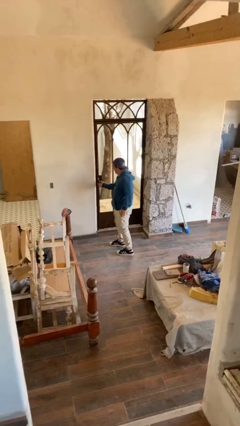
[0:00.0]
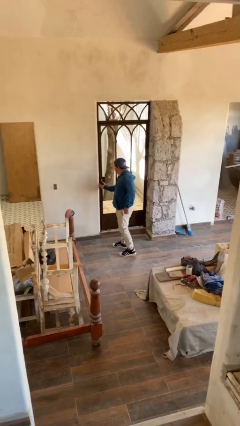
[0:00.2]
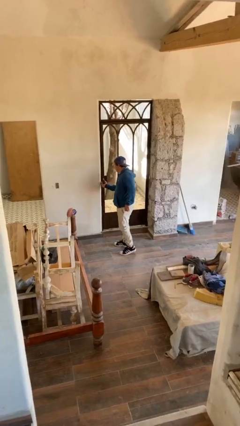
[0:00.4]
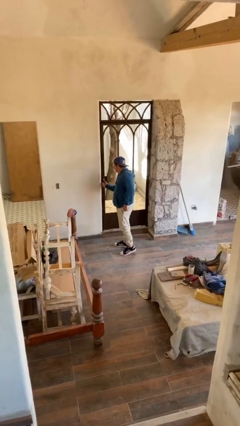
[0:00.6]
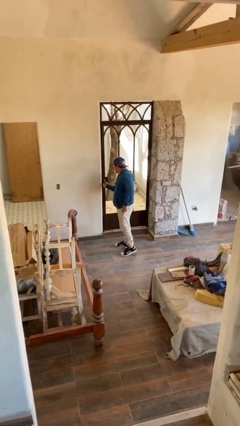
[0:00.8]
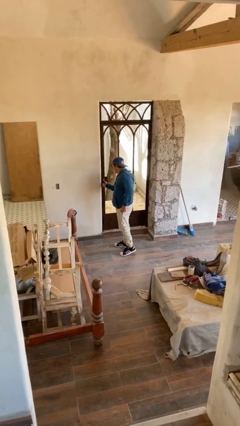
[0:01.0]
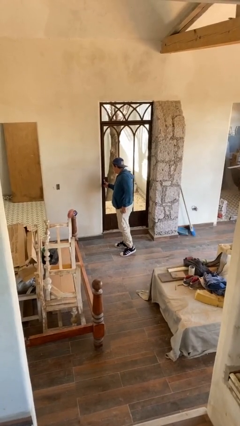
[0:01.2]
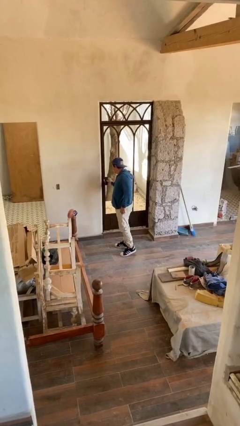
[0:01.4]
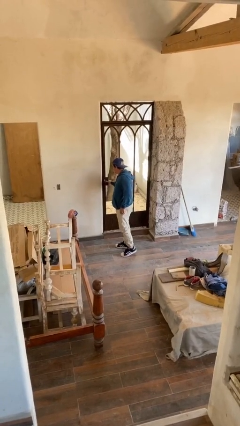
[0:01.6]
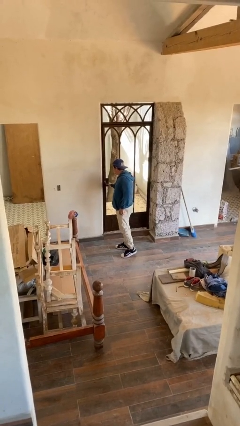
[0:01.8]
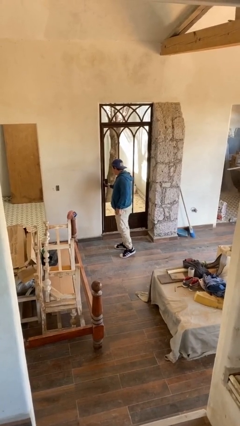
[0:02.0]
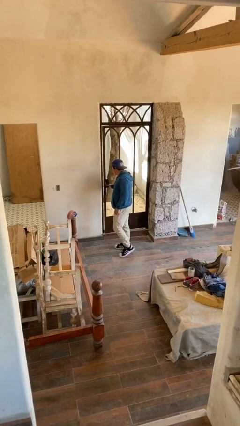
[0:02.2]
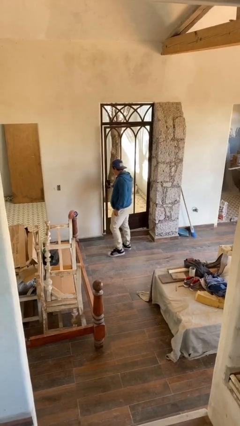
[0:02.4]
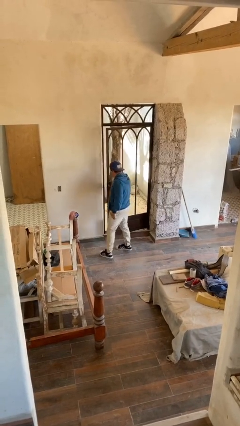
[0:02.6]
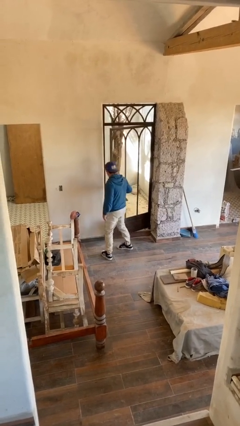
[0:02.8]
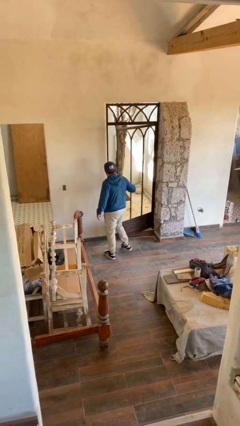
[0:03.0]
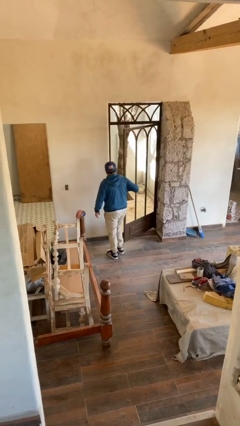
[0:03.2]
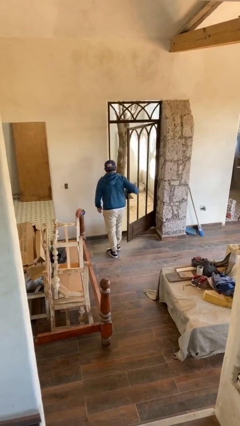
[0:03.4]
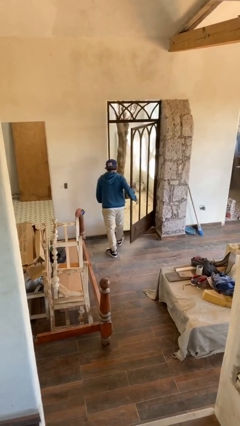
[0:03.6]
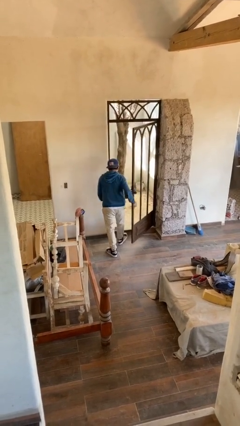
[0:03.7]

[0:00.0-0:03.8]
person opens facility door

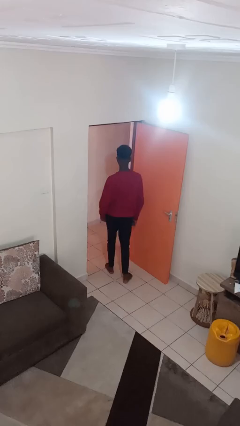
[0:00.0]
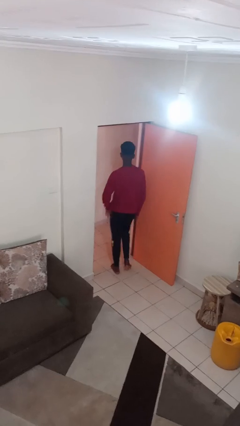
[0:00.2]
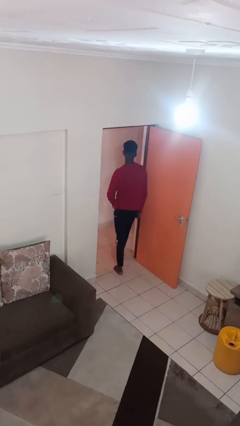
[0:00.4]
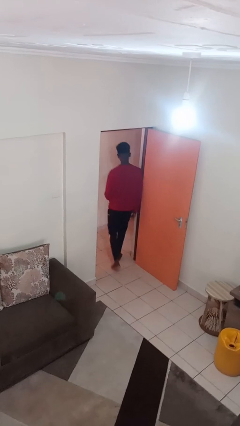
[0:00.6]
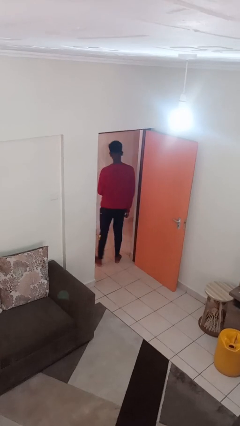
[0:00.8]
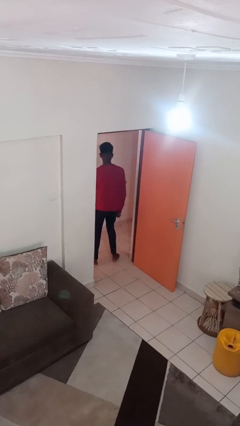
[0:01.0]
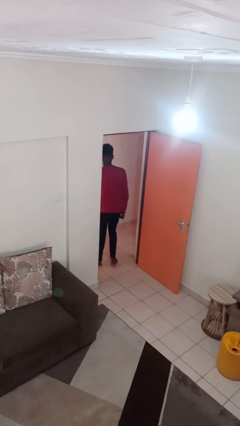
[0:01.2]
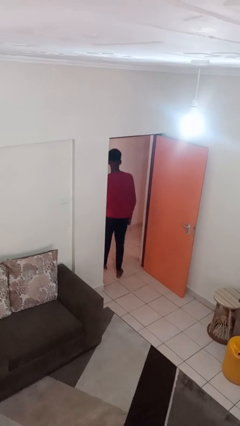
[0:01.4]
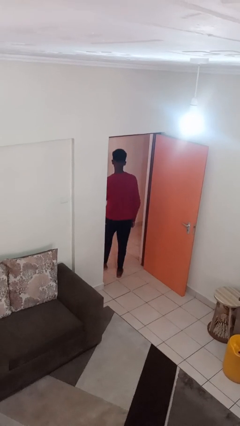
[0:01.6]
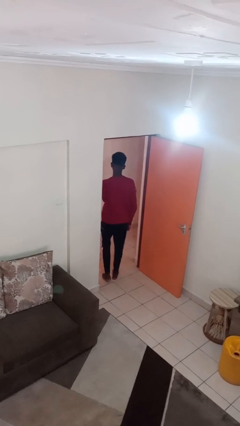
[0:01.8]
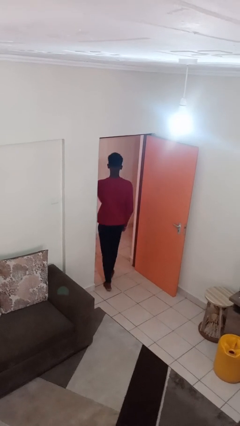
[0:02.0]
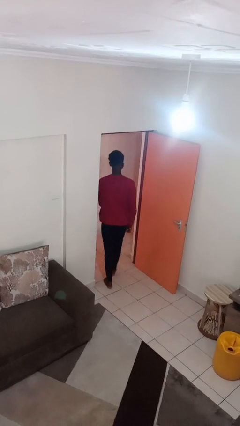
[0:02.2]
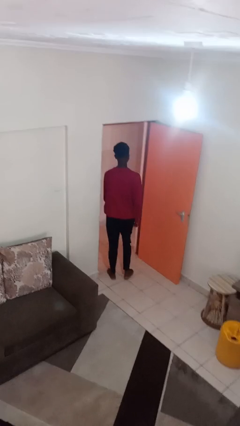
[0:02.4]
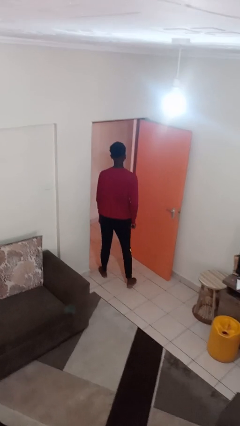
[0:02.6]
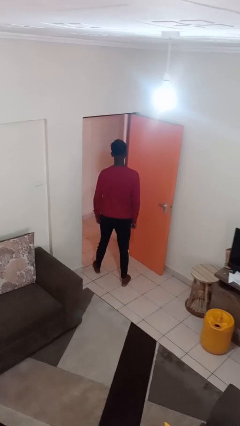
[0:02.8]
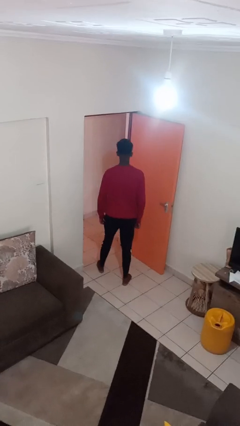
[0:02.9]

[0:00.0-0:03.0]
person bumps into wall

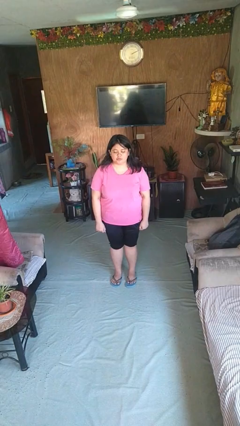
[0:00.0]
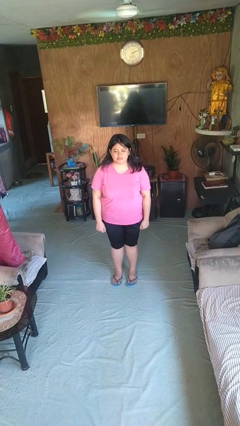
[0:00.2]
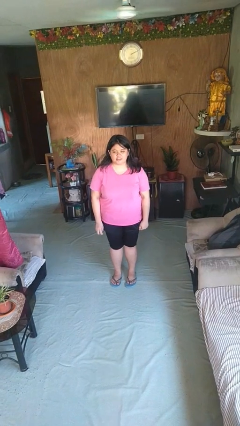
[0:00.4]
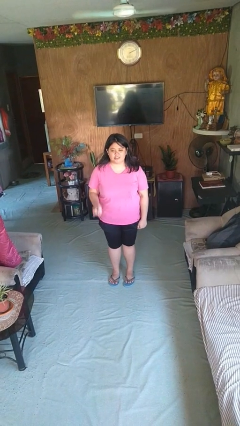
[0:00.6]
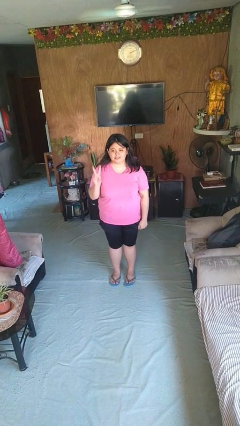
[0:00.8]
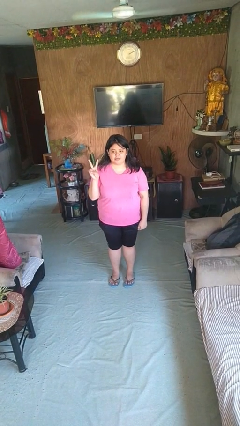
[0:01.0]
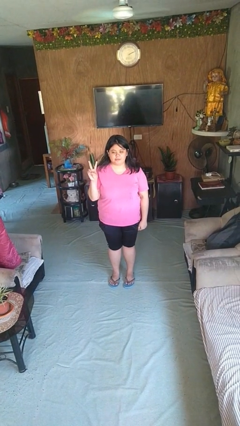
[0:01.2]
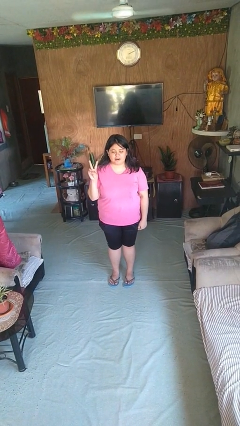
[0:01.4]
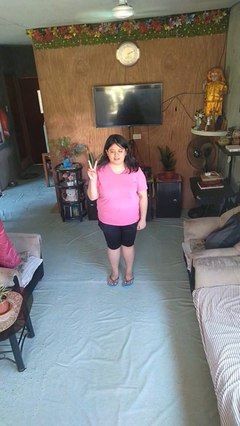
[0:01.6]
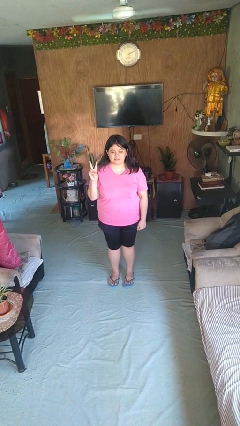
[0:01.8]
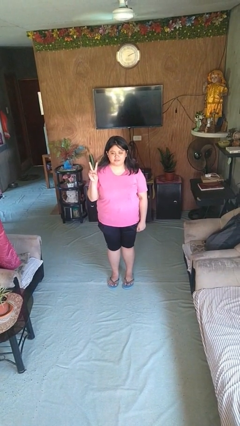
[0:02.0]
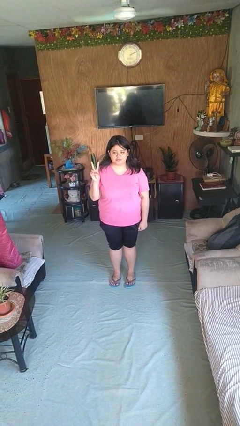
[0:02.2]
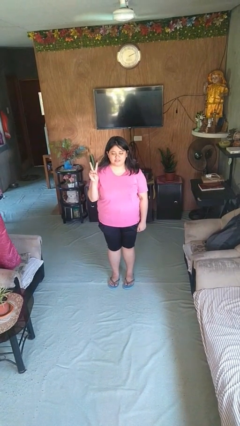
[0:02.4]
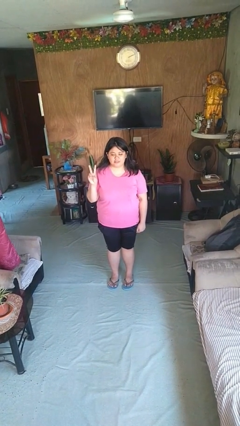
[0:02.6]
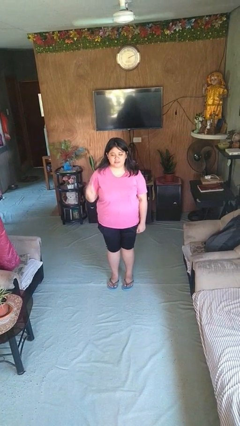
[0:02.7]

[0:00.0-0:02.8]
person gestures peace

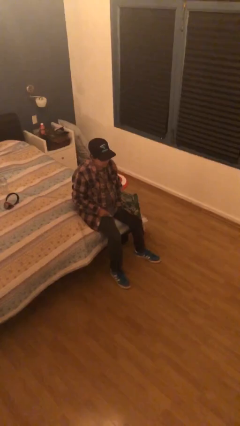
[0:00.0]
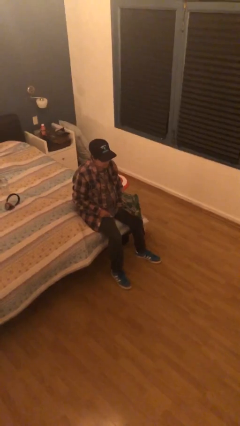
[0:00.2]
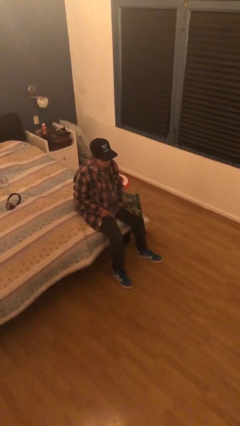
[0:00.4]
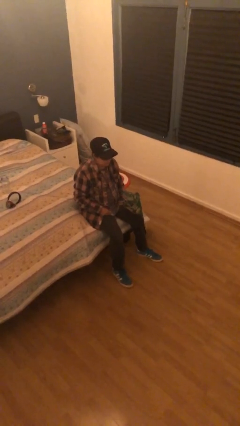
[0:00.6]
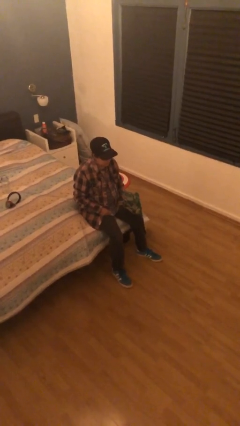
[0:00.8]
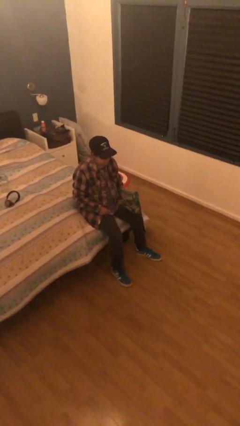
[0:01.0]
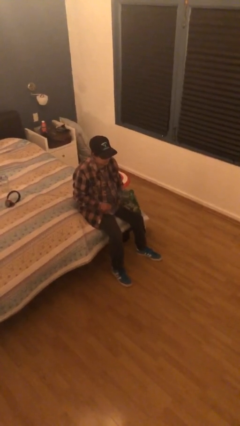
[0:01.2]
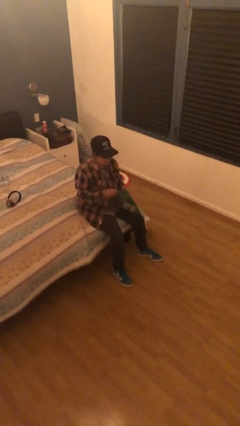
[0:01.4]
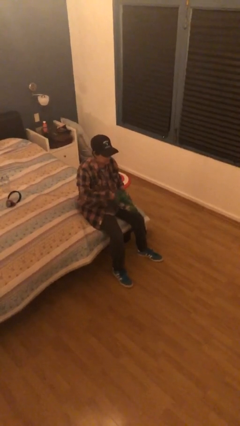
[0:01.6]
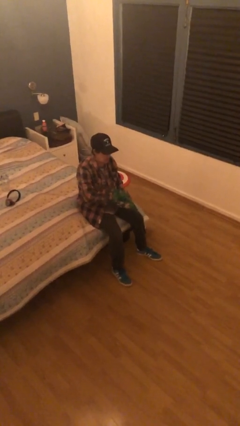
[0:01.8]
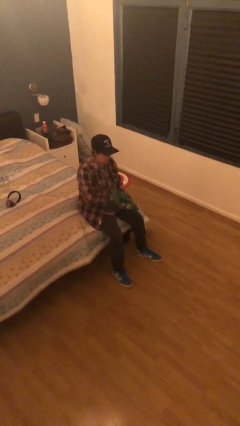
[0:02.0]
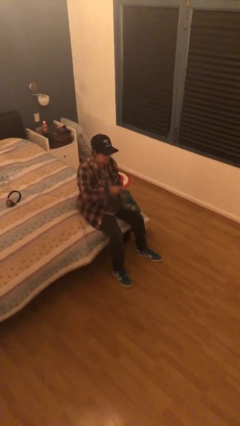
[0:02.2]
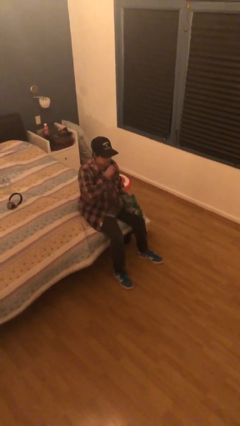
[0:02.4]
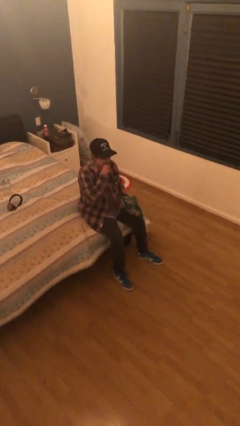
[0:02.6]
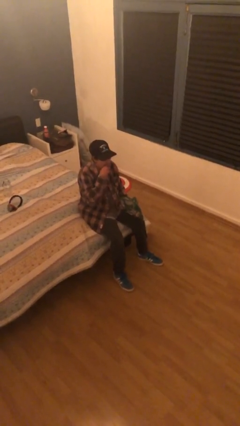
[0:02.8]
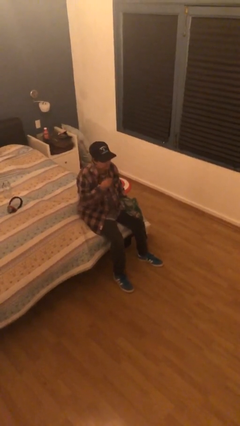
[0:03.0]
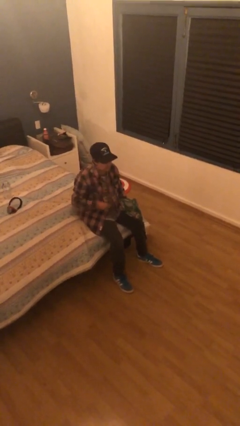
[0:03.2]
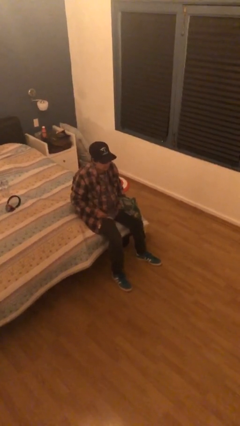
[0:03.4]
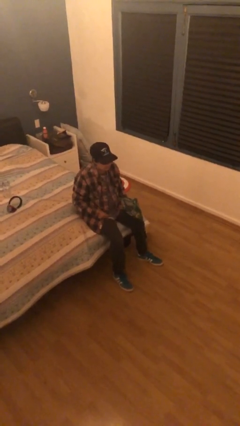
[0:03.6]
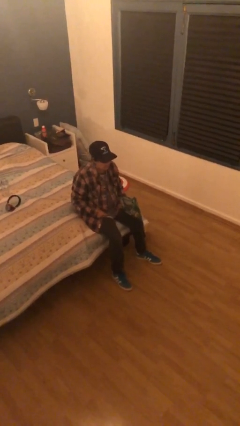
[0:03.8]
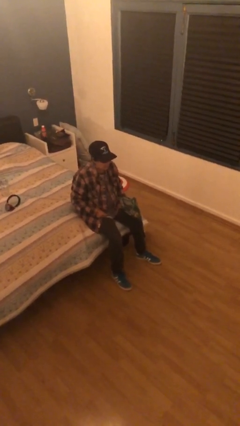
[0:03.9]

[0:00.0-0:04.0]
person eats snack from bag

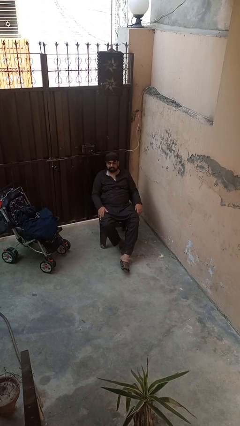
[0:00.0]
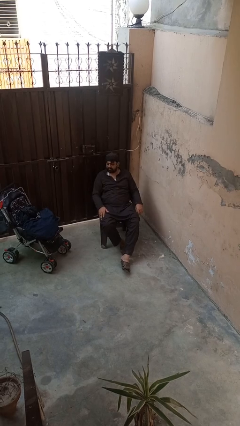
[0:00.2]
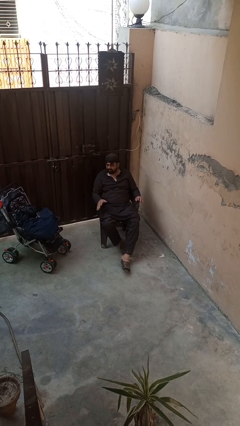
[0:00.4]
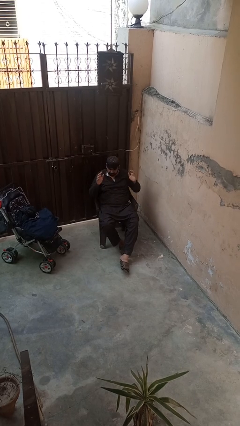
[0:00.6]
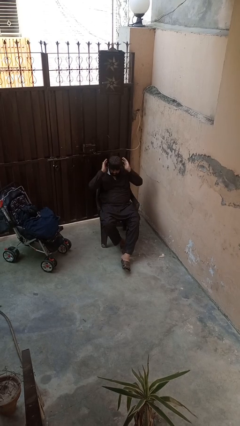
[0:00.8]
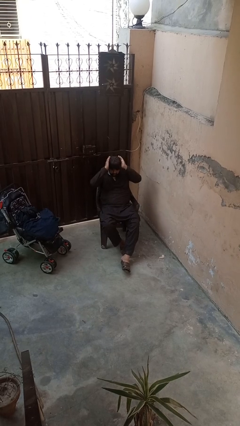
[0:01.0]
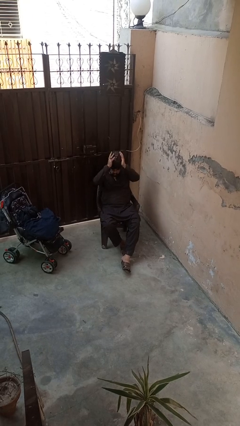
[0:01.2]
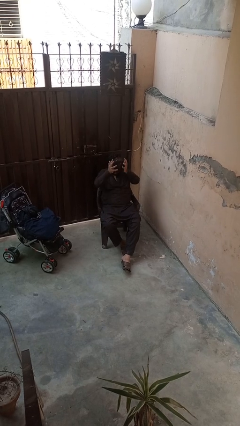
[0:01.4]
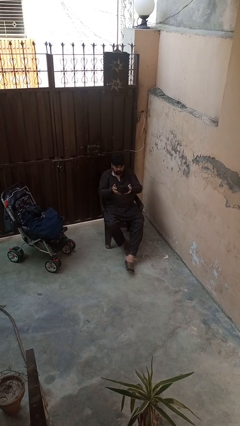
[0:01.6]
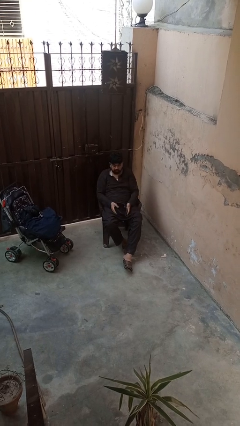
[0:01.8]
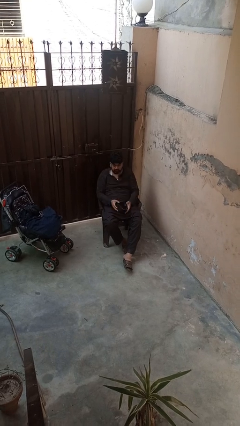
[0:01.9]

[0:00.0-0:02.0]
person takes off hat

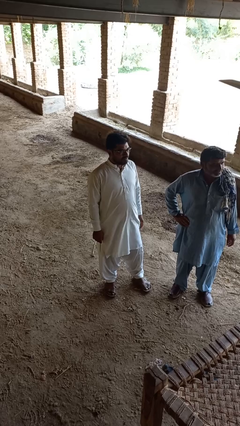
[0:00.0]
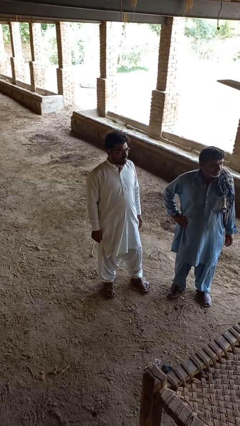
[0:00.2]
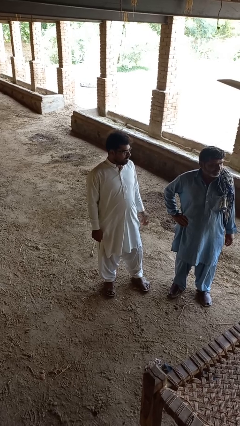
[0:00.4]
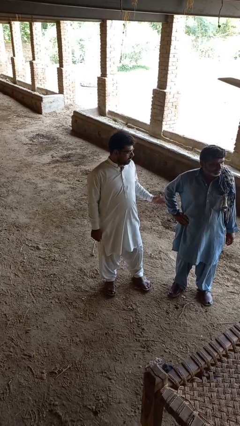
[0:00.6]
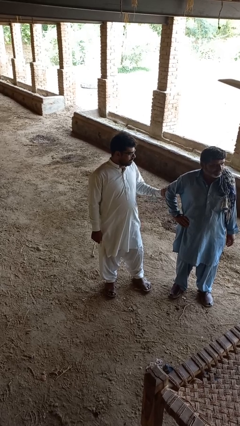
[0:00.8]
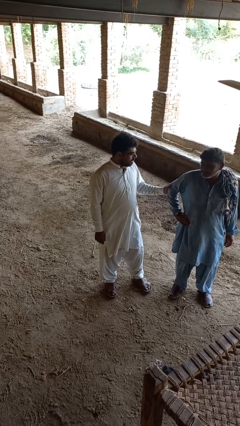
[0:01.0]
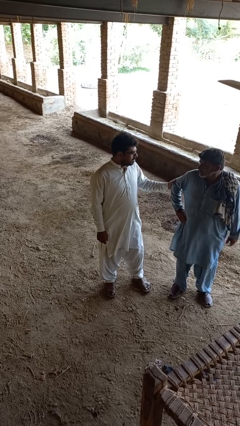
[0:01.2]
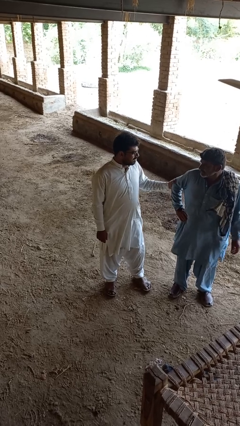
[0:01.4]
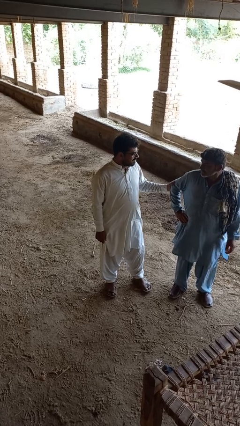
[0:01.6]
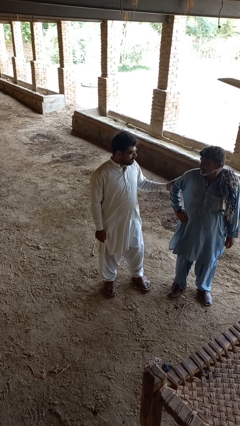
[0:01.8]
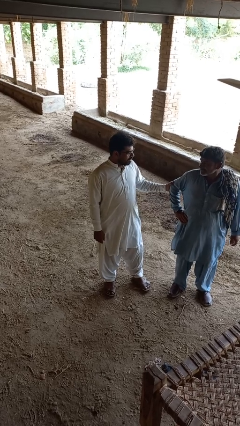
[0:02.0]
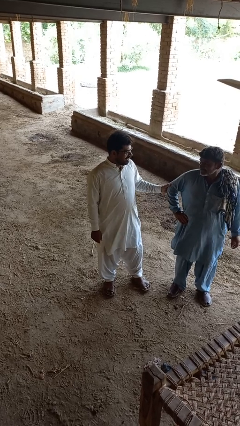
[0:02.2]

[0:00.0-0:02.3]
person grabs person by forearm
